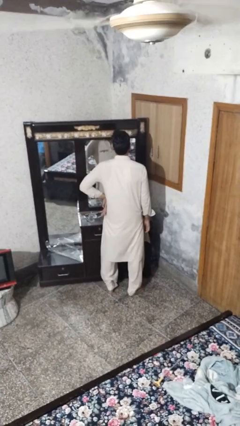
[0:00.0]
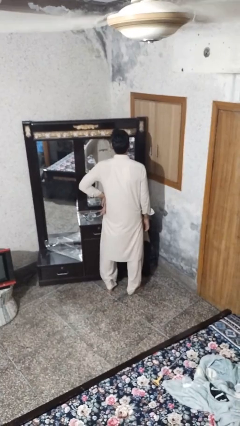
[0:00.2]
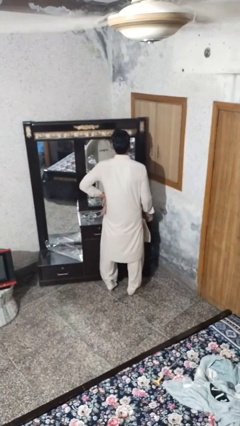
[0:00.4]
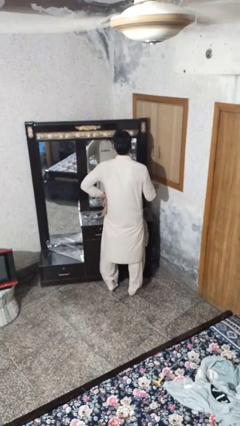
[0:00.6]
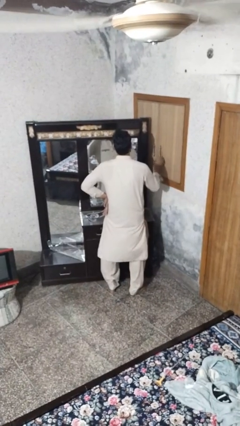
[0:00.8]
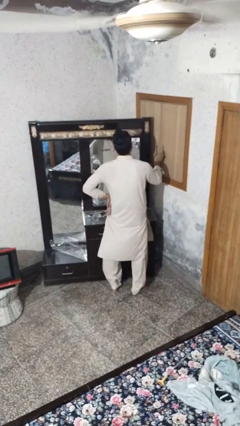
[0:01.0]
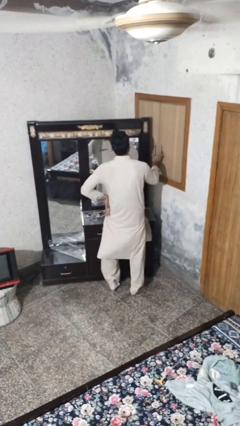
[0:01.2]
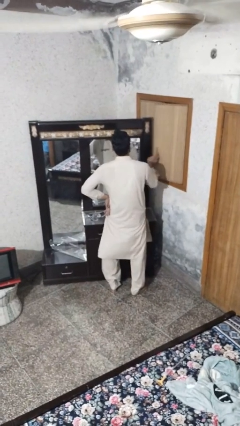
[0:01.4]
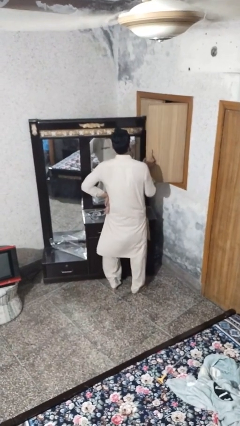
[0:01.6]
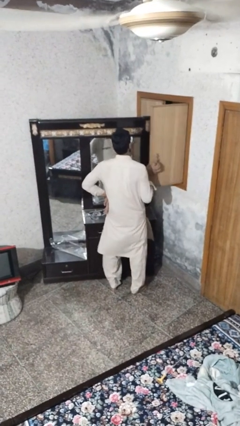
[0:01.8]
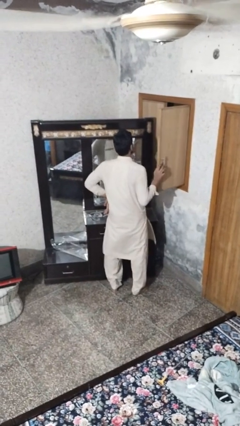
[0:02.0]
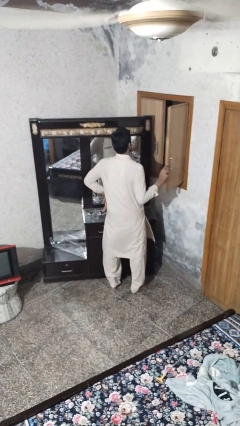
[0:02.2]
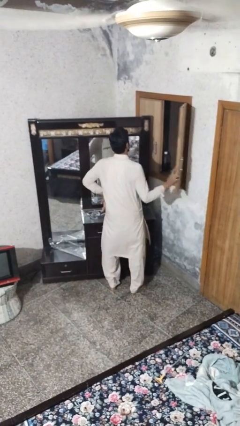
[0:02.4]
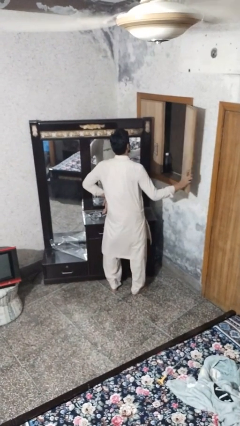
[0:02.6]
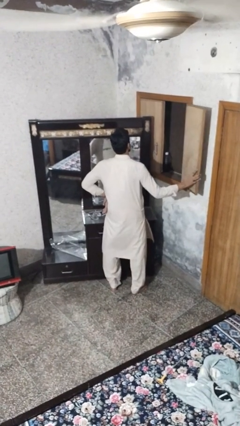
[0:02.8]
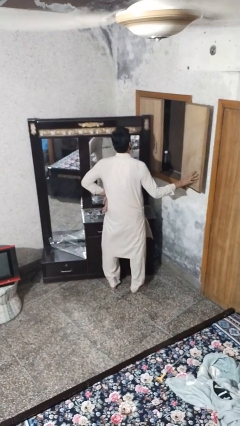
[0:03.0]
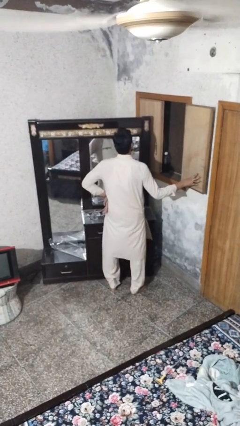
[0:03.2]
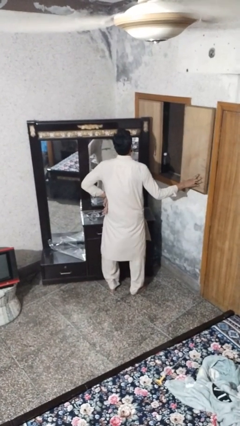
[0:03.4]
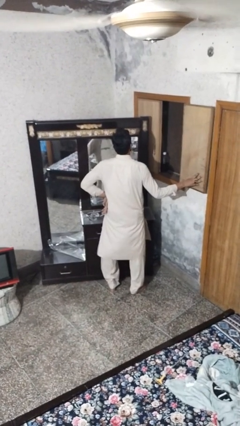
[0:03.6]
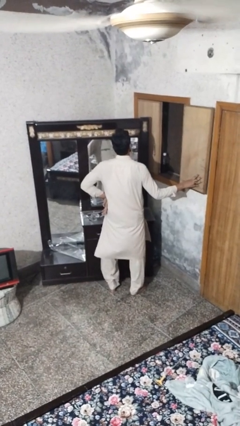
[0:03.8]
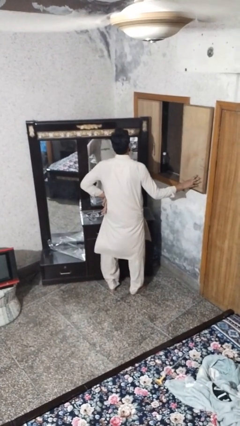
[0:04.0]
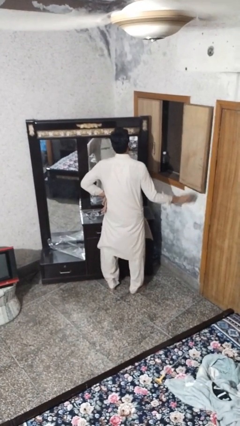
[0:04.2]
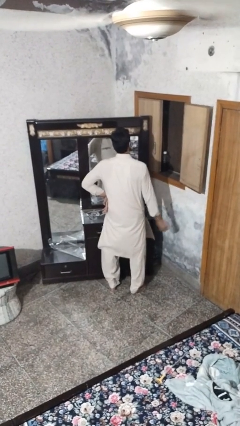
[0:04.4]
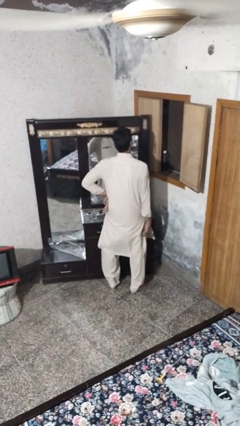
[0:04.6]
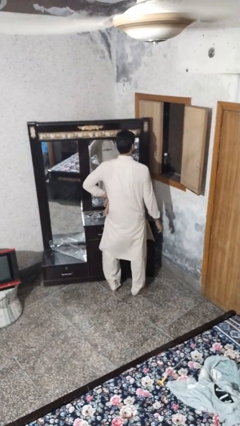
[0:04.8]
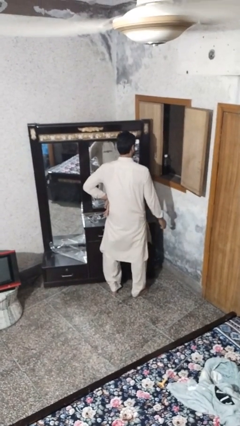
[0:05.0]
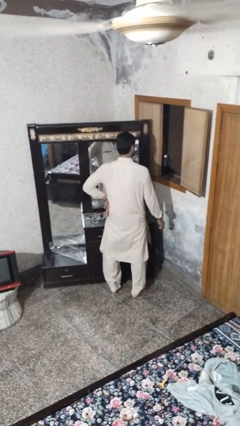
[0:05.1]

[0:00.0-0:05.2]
person opens home window

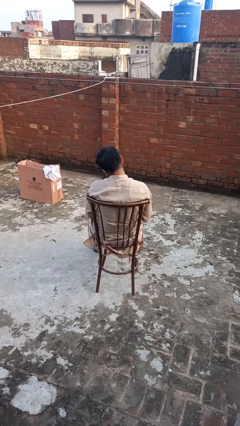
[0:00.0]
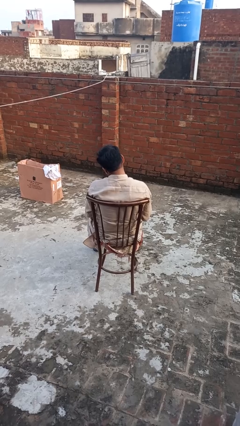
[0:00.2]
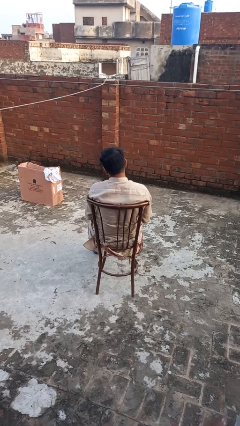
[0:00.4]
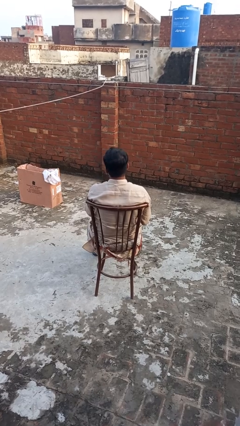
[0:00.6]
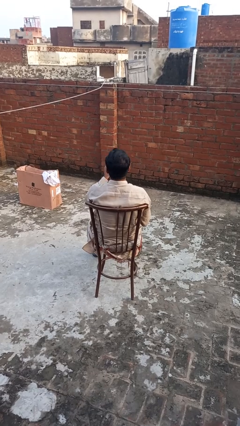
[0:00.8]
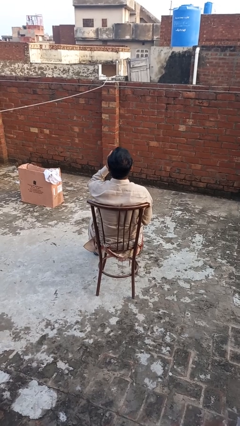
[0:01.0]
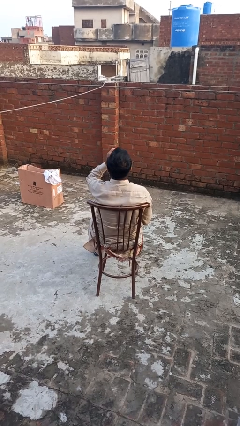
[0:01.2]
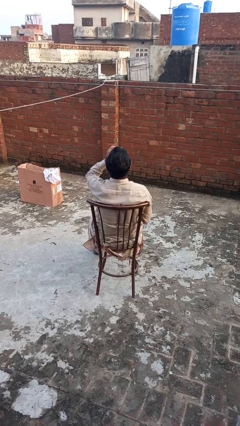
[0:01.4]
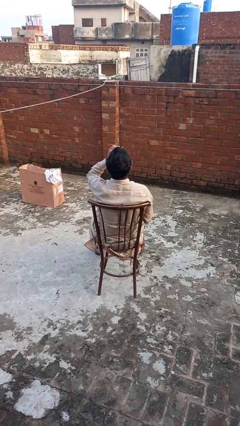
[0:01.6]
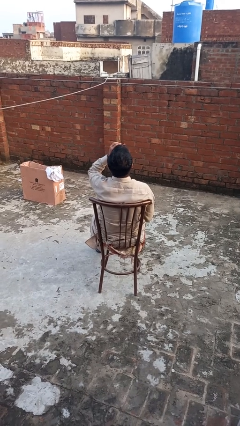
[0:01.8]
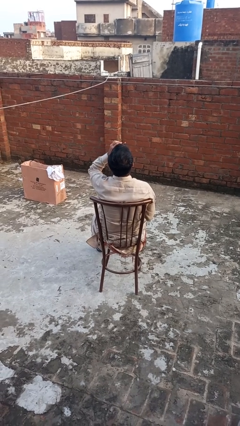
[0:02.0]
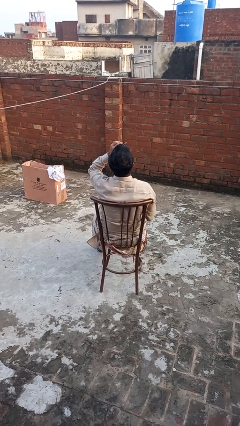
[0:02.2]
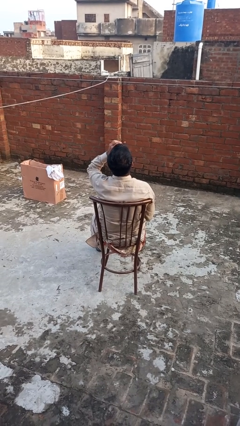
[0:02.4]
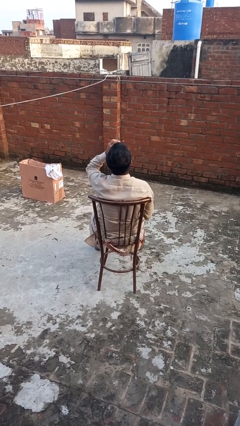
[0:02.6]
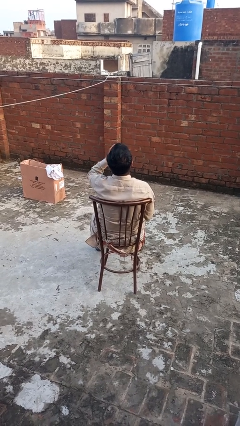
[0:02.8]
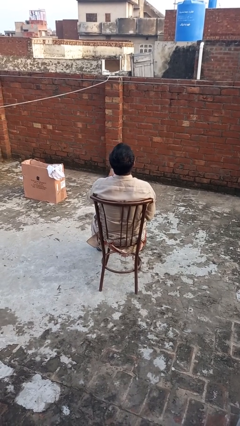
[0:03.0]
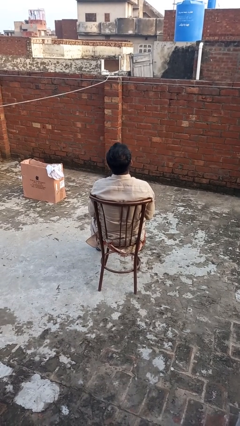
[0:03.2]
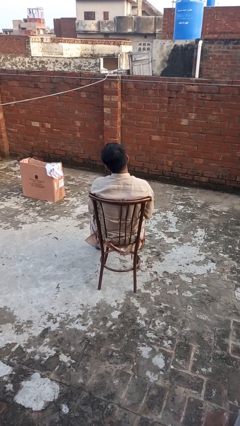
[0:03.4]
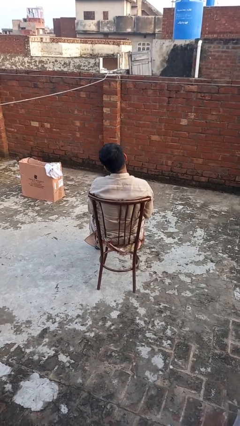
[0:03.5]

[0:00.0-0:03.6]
person drinks from mug

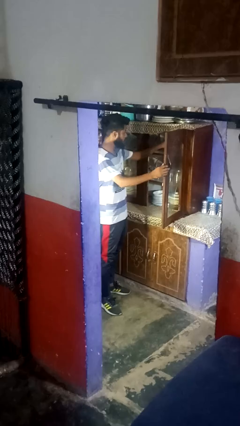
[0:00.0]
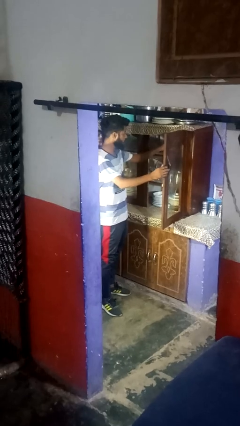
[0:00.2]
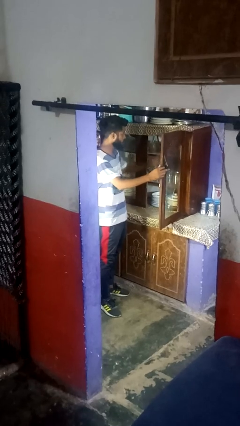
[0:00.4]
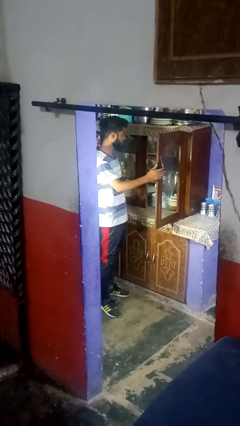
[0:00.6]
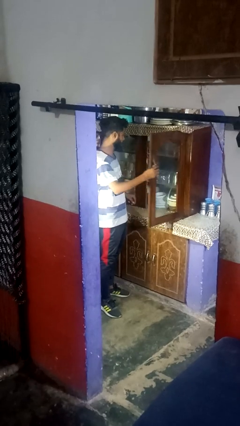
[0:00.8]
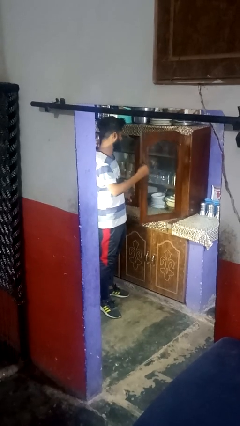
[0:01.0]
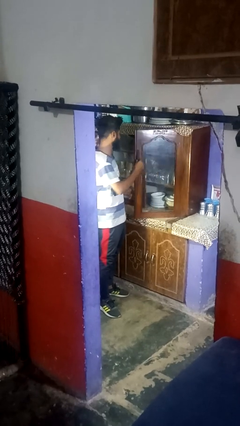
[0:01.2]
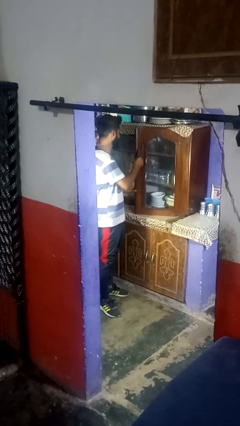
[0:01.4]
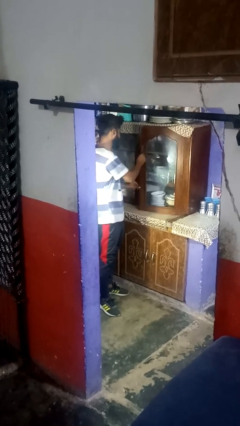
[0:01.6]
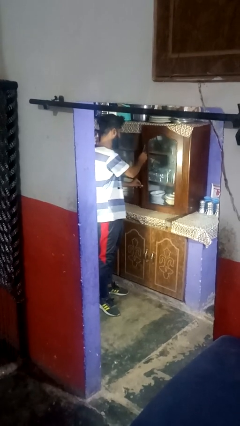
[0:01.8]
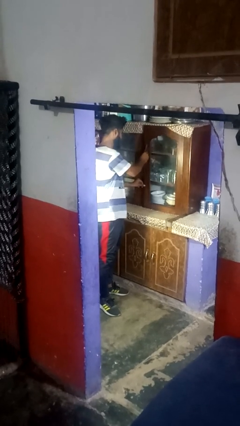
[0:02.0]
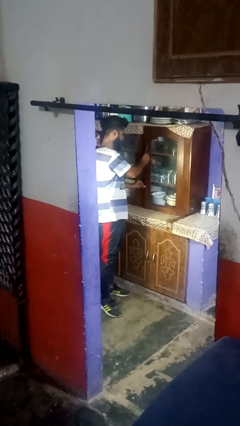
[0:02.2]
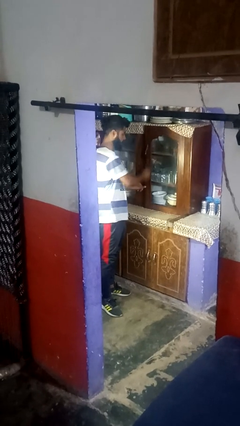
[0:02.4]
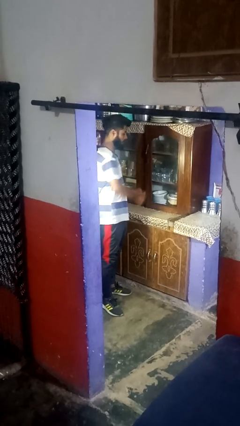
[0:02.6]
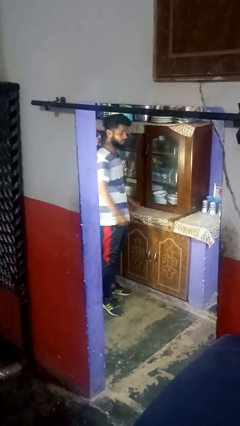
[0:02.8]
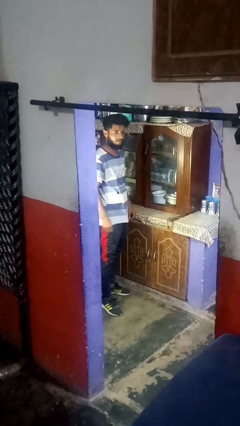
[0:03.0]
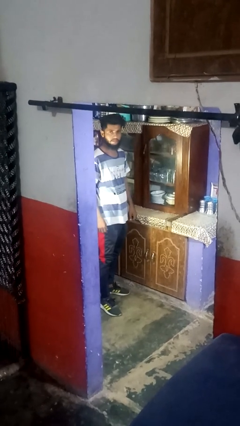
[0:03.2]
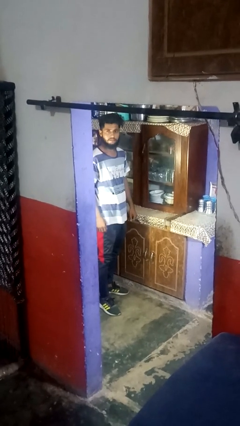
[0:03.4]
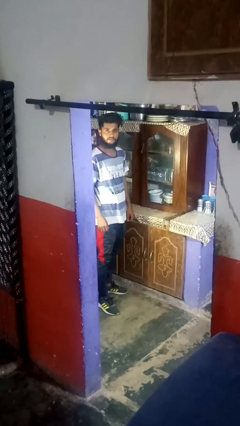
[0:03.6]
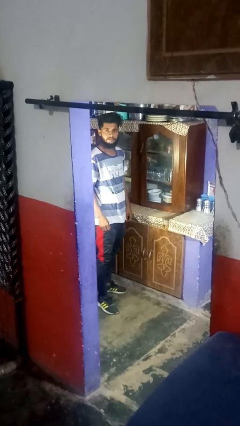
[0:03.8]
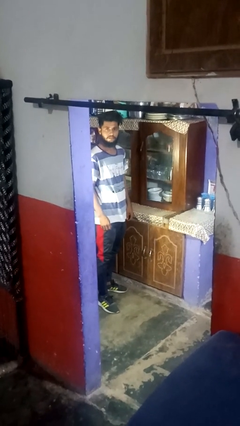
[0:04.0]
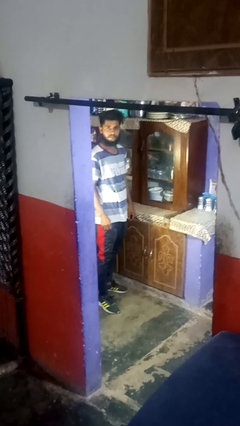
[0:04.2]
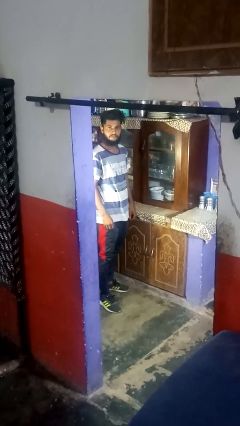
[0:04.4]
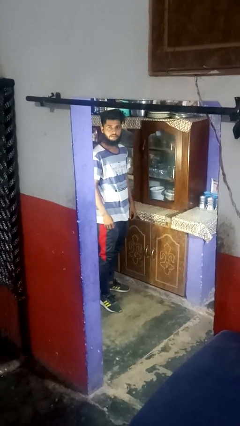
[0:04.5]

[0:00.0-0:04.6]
person closes cabinet

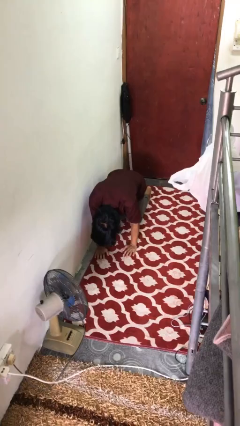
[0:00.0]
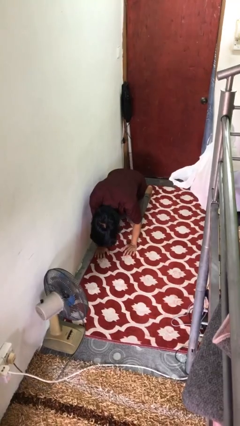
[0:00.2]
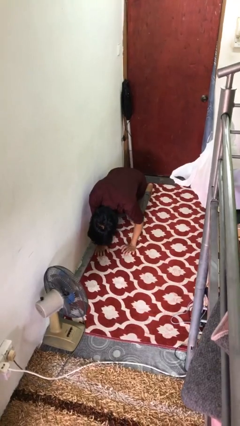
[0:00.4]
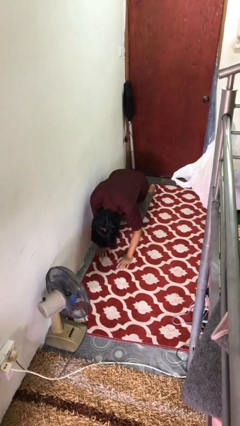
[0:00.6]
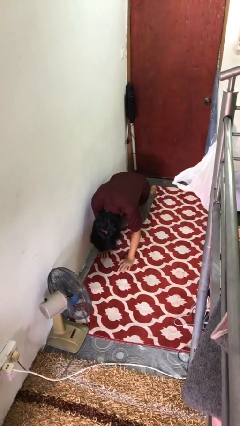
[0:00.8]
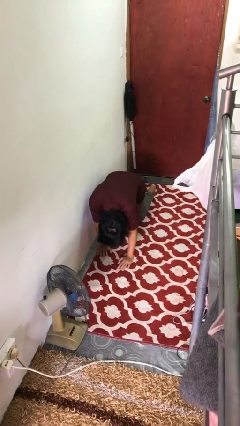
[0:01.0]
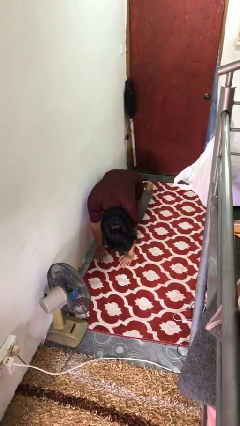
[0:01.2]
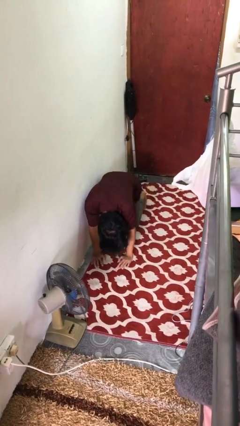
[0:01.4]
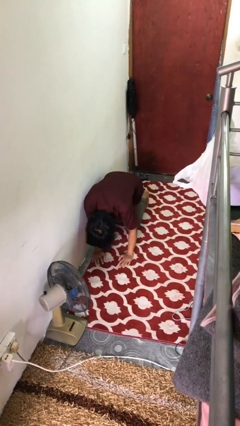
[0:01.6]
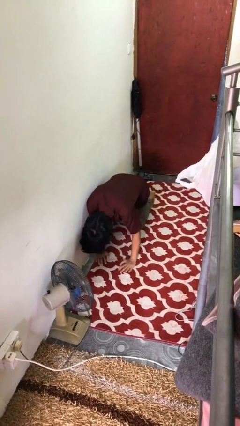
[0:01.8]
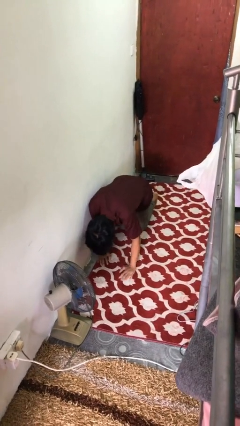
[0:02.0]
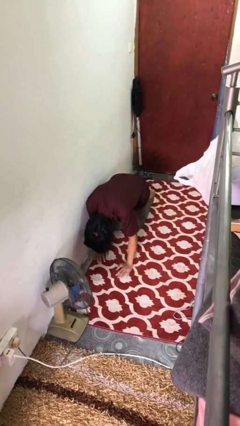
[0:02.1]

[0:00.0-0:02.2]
person crawls

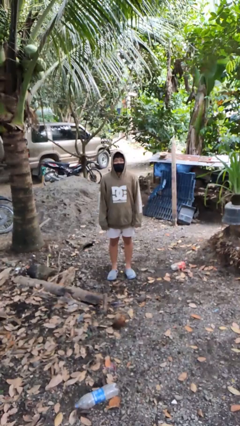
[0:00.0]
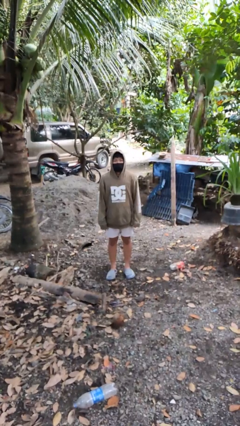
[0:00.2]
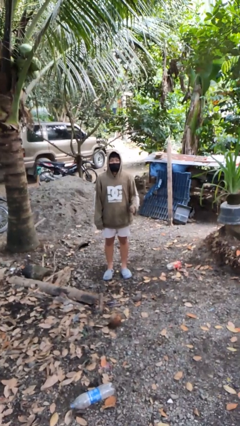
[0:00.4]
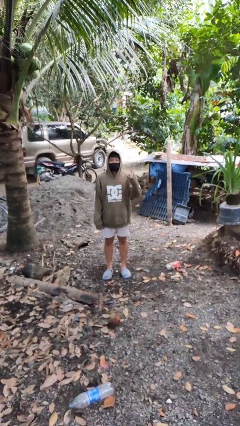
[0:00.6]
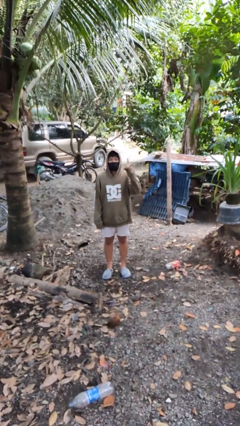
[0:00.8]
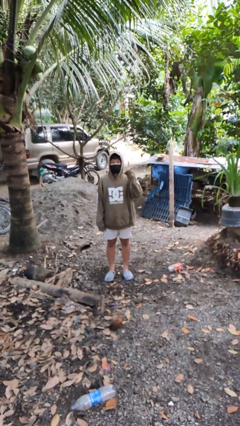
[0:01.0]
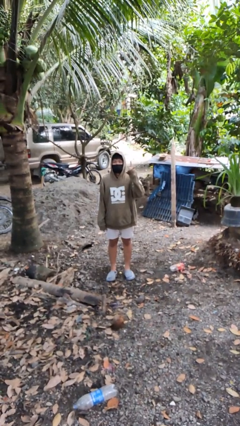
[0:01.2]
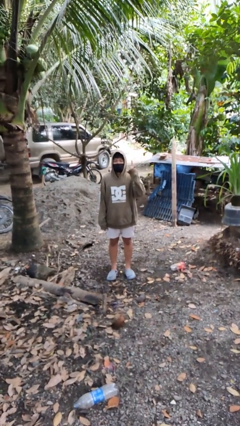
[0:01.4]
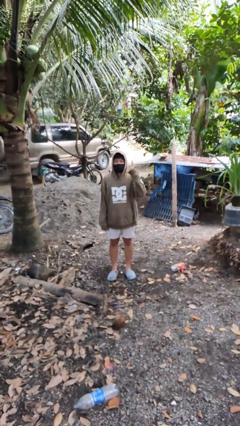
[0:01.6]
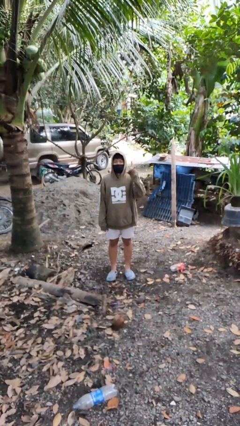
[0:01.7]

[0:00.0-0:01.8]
person gestures number one

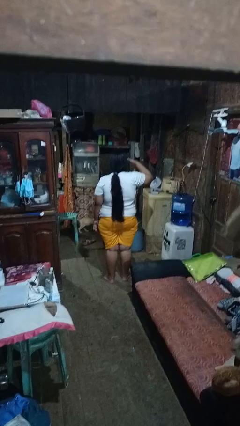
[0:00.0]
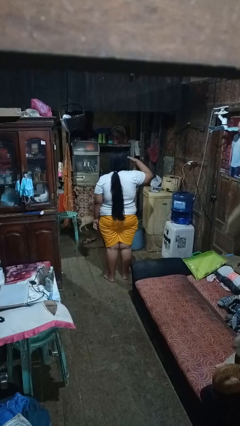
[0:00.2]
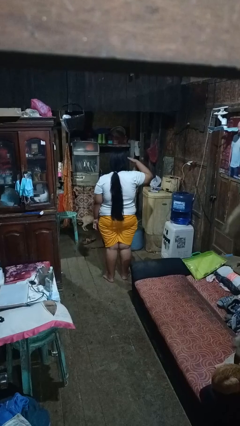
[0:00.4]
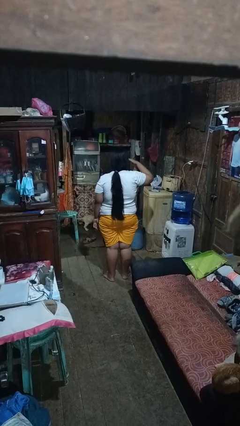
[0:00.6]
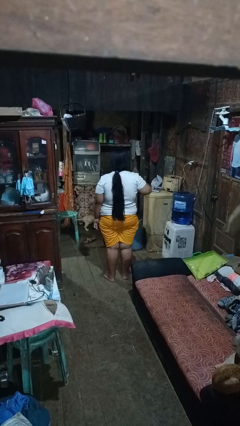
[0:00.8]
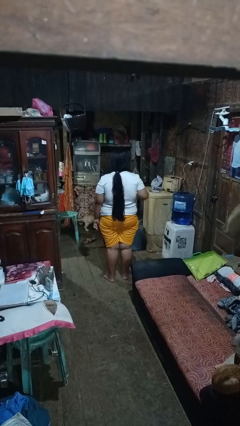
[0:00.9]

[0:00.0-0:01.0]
person salutes
